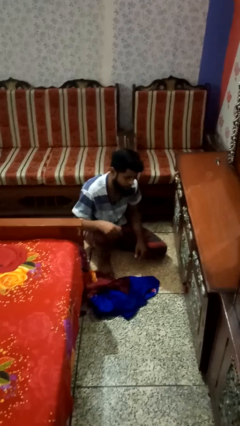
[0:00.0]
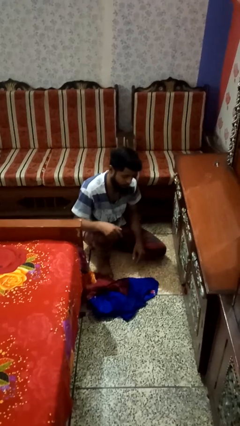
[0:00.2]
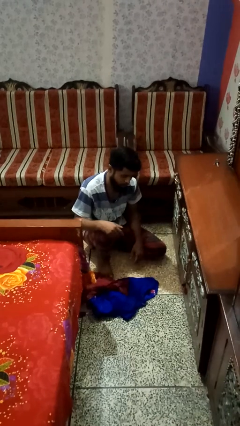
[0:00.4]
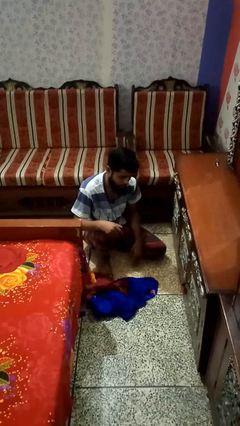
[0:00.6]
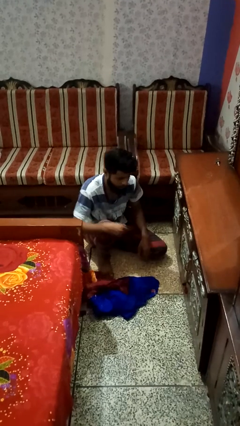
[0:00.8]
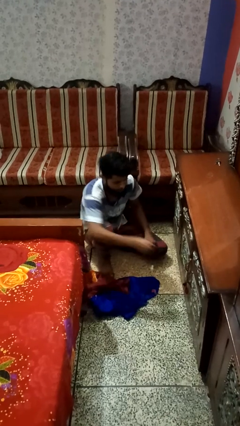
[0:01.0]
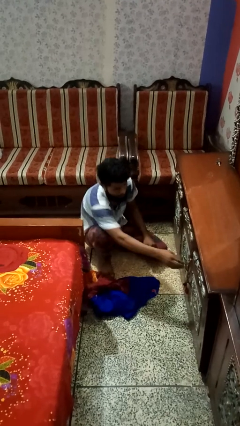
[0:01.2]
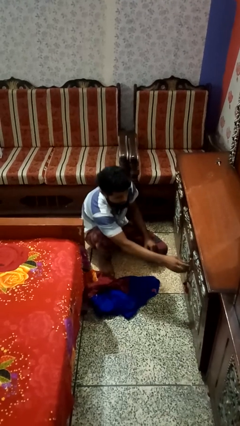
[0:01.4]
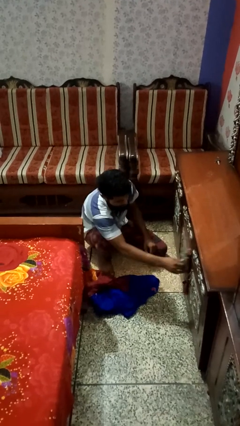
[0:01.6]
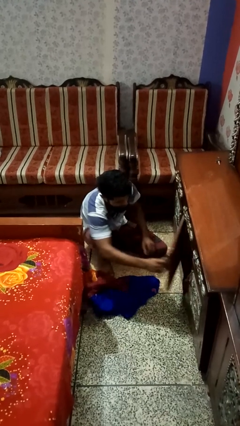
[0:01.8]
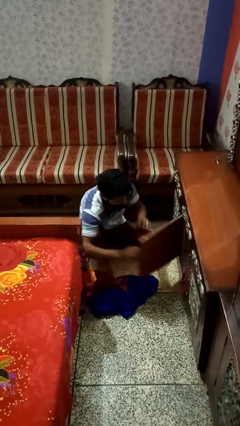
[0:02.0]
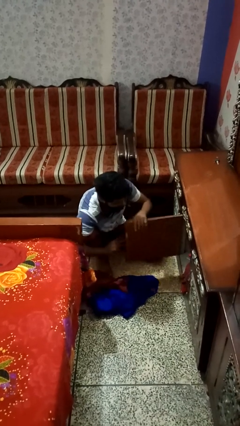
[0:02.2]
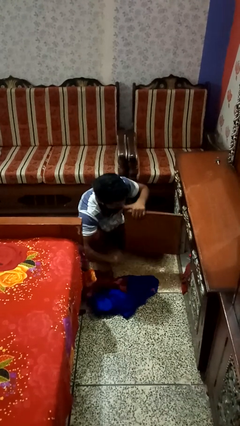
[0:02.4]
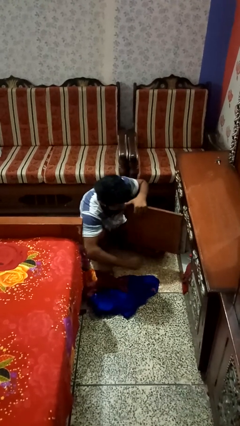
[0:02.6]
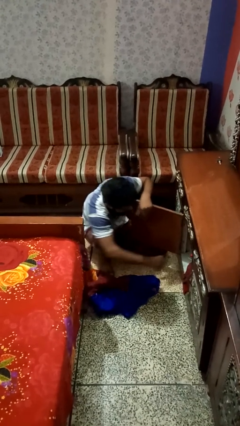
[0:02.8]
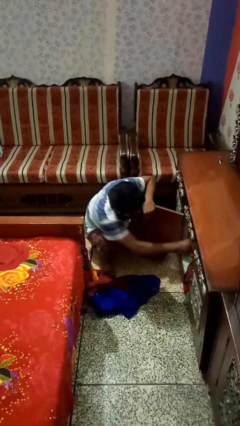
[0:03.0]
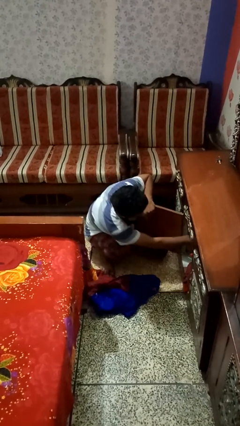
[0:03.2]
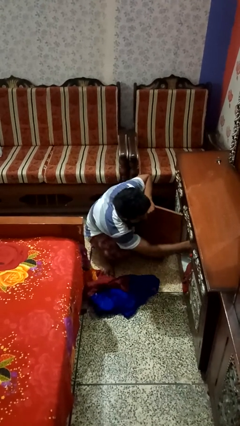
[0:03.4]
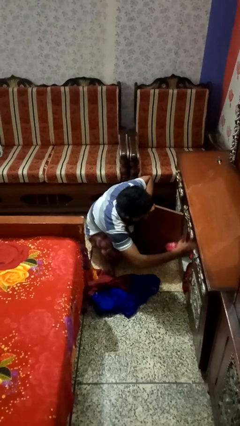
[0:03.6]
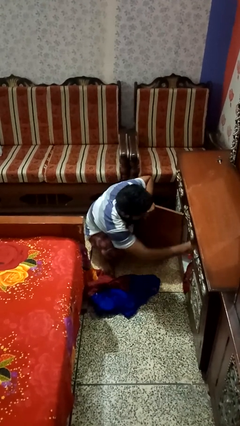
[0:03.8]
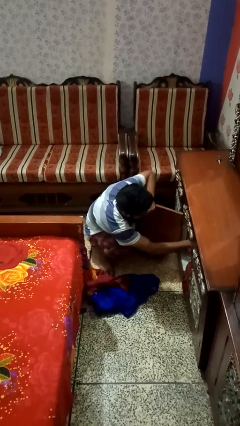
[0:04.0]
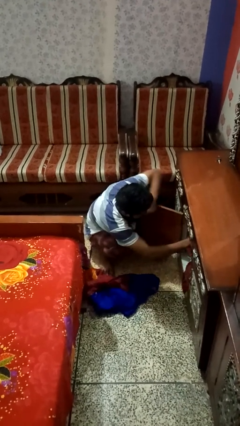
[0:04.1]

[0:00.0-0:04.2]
person takes clothes from dresser

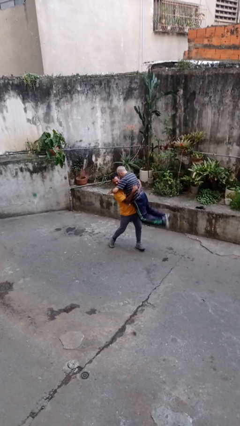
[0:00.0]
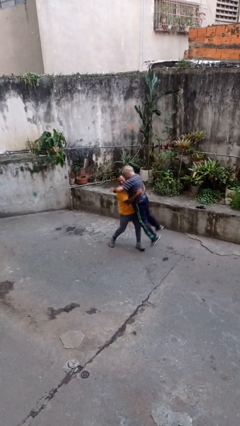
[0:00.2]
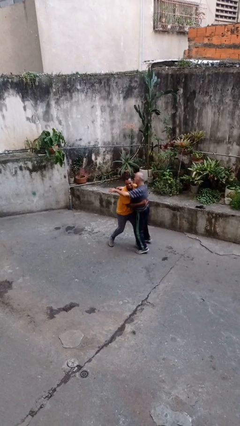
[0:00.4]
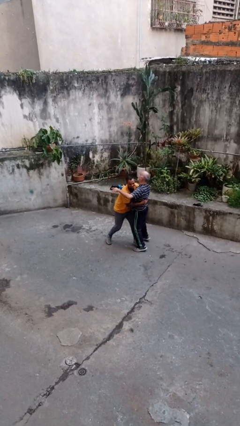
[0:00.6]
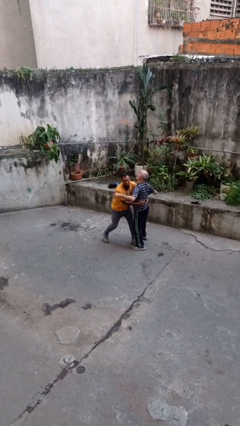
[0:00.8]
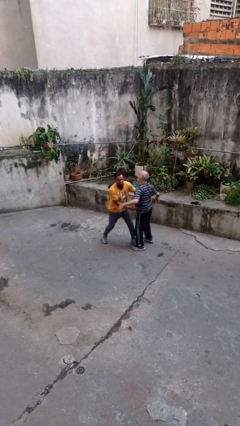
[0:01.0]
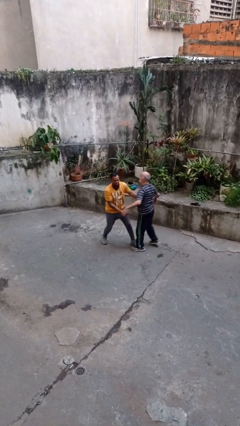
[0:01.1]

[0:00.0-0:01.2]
person puts down person

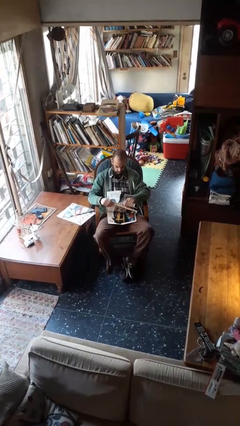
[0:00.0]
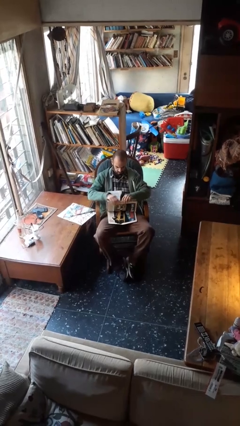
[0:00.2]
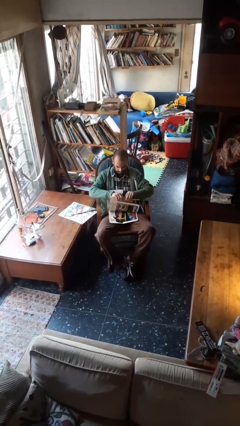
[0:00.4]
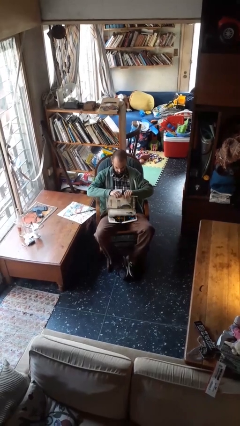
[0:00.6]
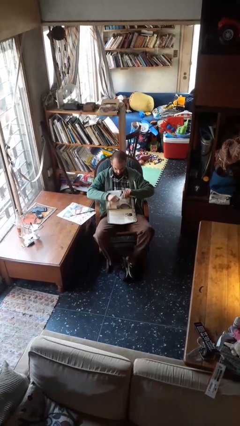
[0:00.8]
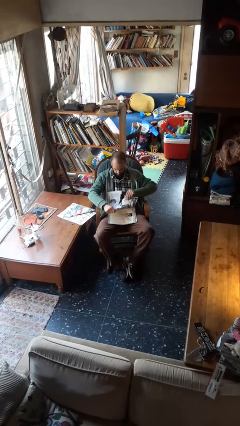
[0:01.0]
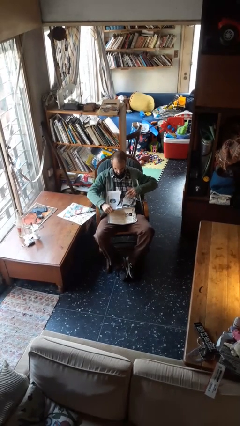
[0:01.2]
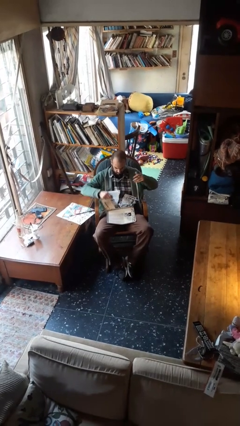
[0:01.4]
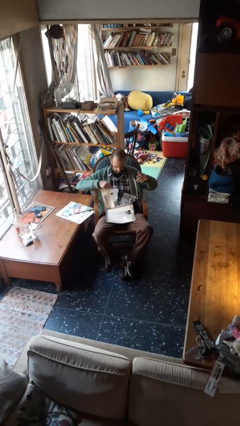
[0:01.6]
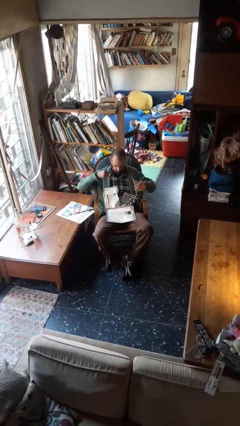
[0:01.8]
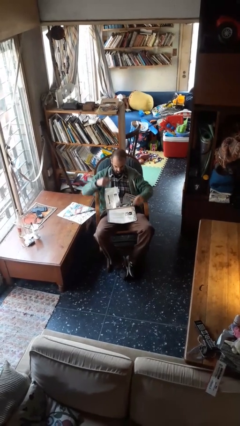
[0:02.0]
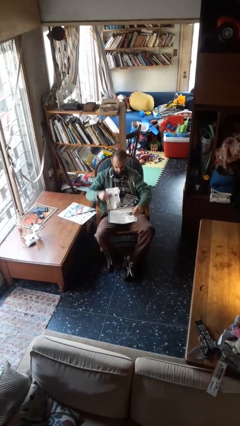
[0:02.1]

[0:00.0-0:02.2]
person tears paper

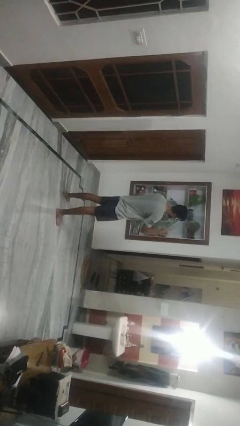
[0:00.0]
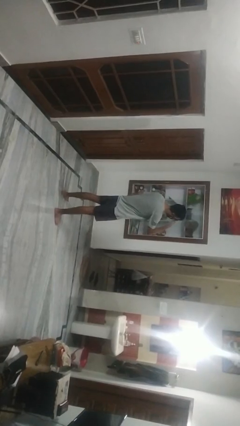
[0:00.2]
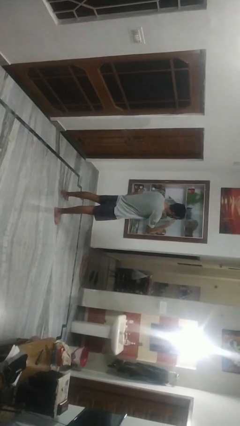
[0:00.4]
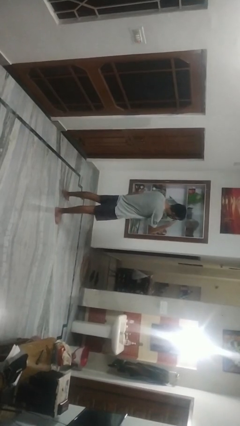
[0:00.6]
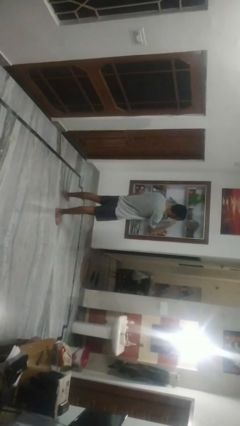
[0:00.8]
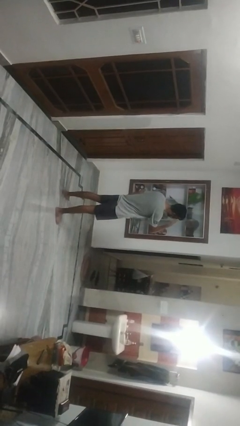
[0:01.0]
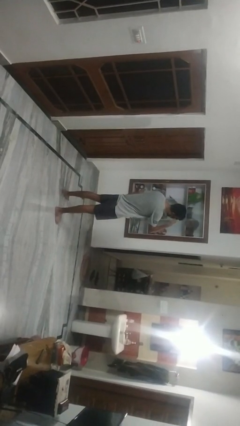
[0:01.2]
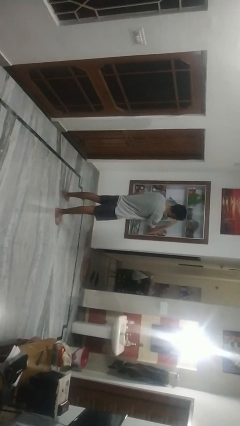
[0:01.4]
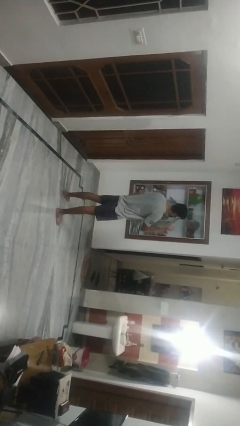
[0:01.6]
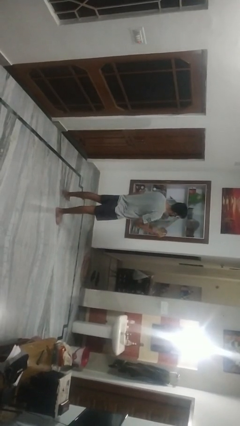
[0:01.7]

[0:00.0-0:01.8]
person scratches face

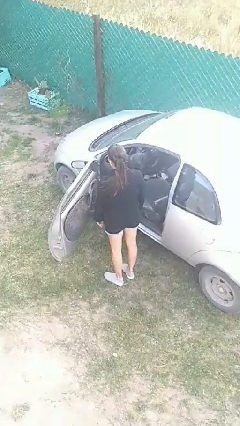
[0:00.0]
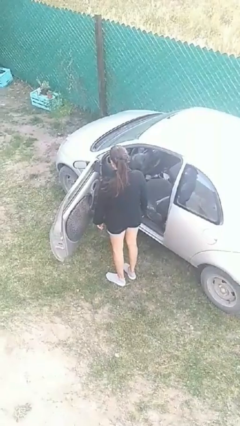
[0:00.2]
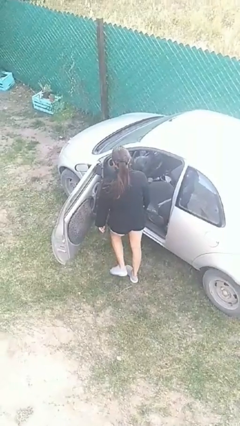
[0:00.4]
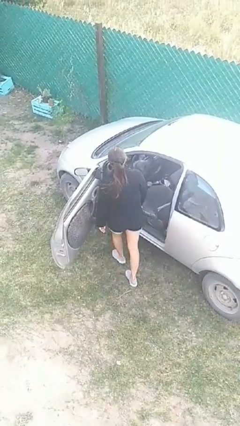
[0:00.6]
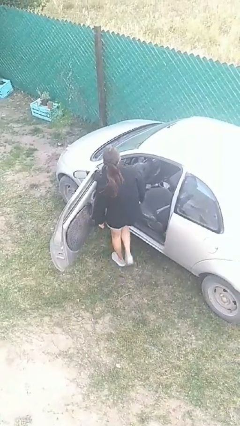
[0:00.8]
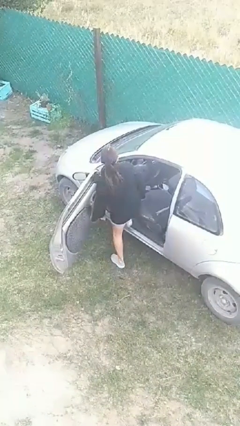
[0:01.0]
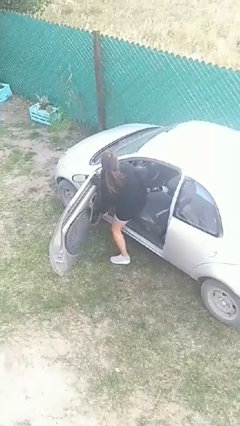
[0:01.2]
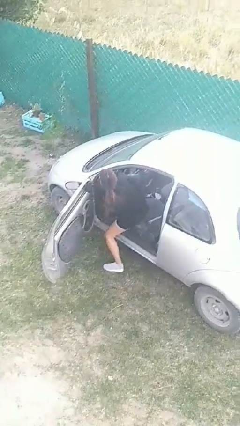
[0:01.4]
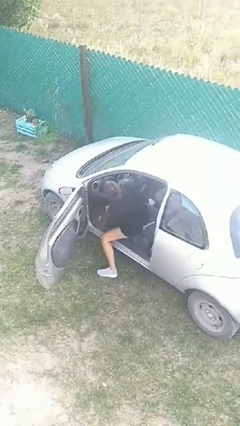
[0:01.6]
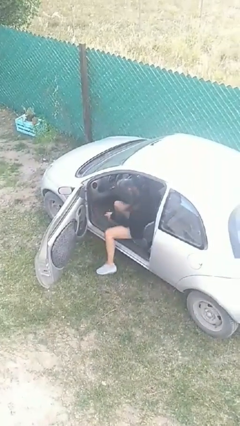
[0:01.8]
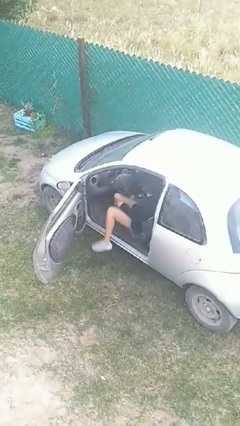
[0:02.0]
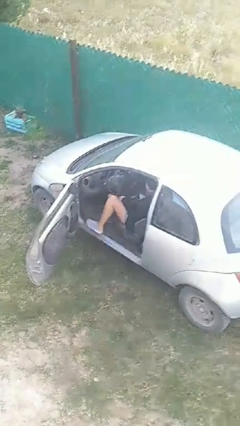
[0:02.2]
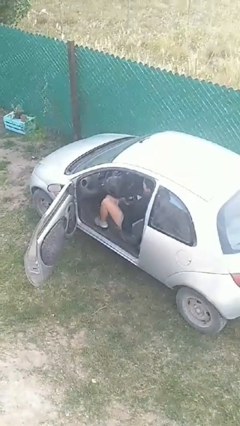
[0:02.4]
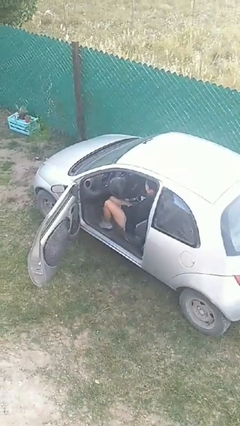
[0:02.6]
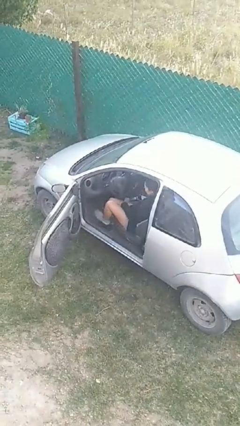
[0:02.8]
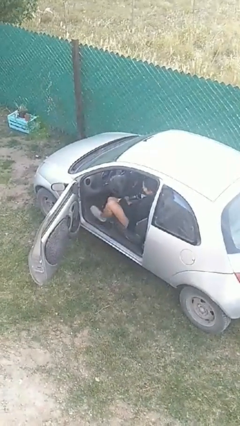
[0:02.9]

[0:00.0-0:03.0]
person enters car

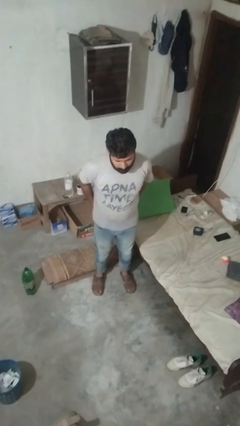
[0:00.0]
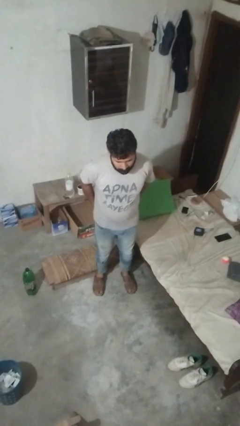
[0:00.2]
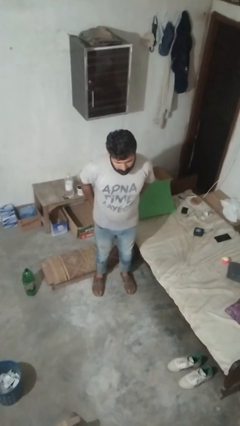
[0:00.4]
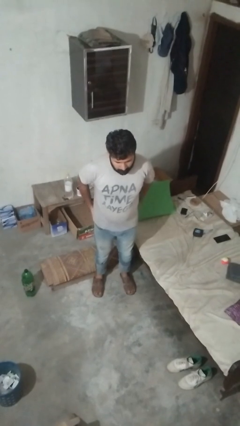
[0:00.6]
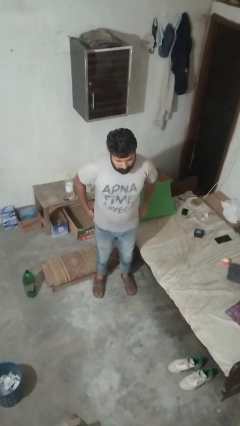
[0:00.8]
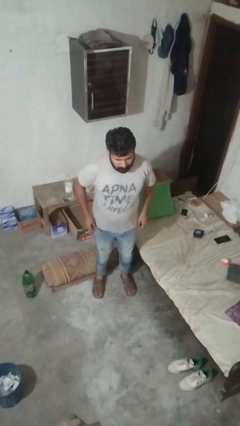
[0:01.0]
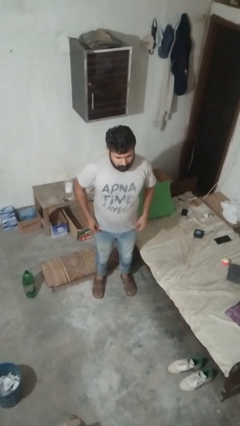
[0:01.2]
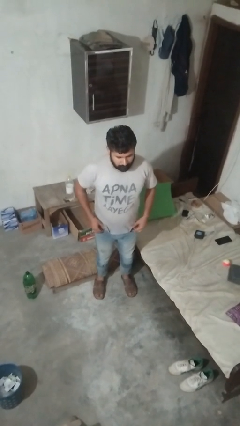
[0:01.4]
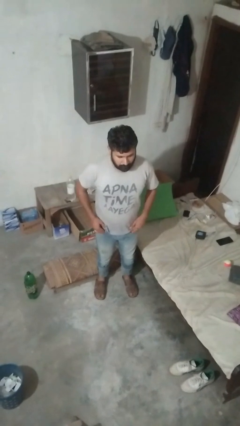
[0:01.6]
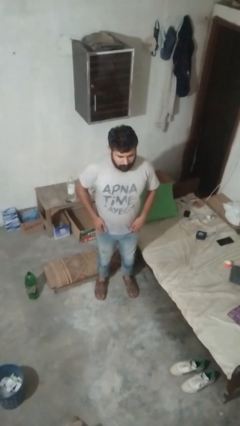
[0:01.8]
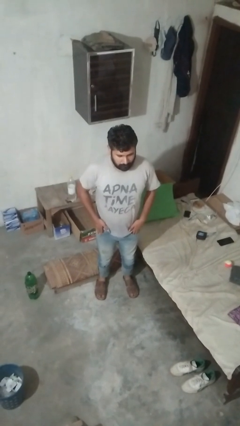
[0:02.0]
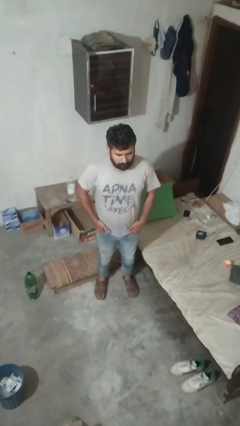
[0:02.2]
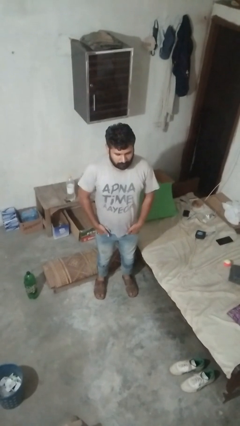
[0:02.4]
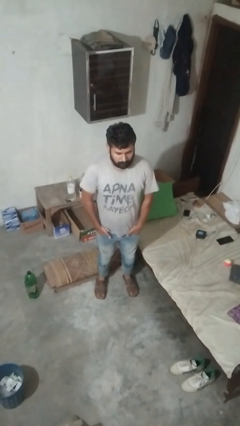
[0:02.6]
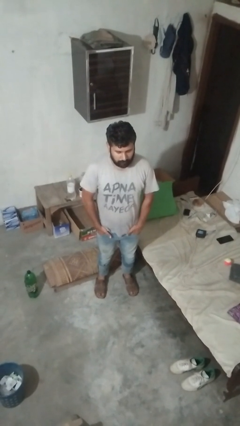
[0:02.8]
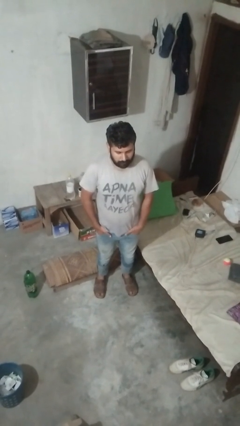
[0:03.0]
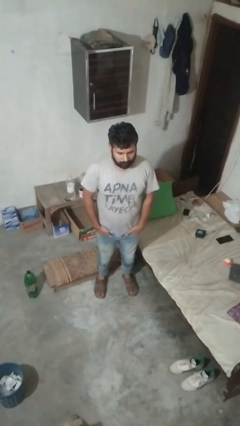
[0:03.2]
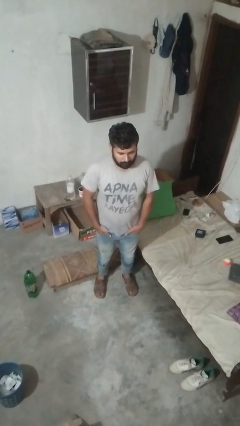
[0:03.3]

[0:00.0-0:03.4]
person puts hands in back pockets

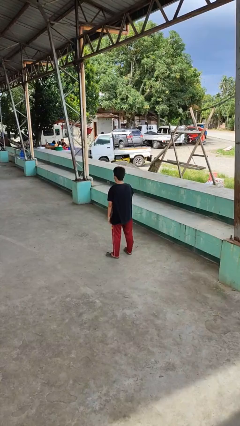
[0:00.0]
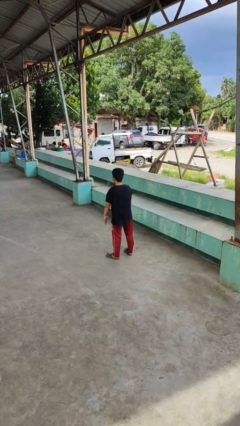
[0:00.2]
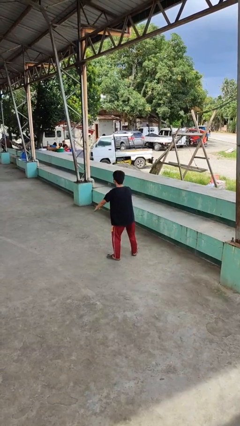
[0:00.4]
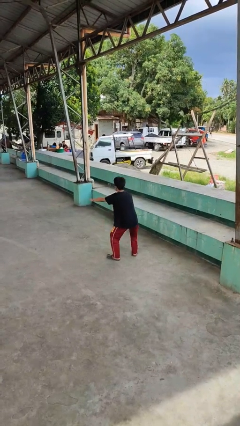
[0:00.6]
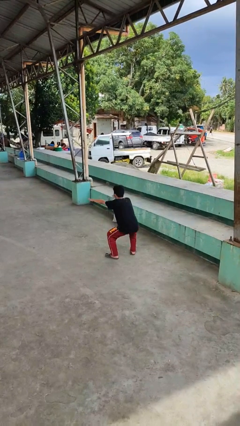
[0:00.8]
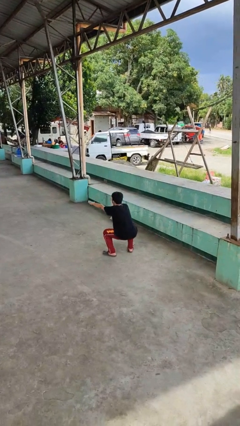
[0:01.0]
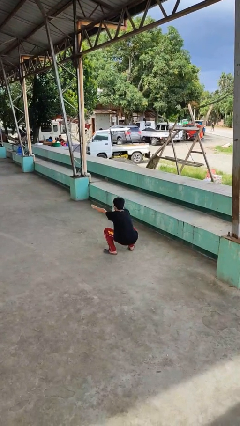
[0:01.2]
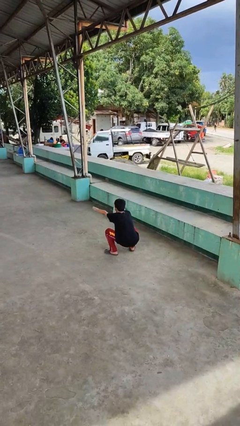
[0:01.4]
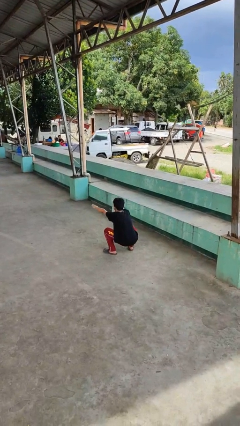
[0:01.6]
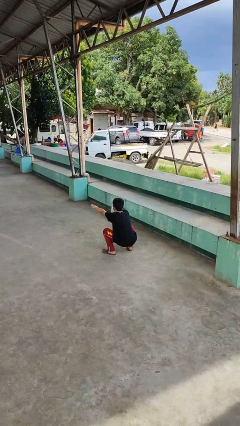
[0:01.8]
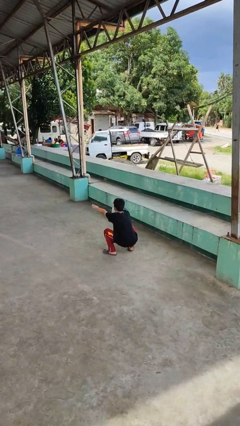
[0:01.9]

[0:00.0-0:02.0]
person squats
